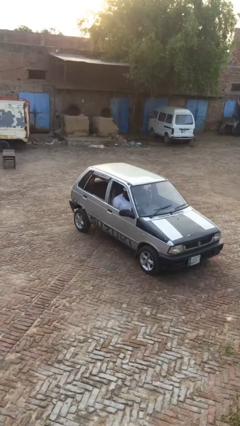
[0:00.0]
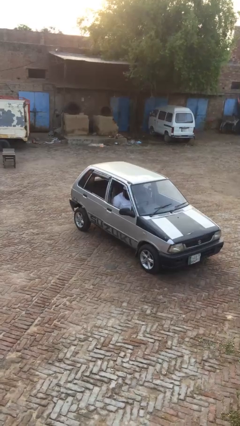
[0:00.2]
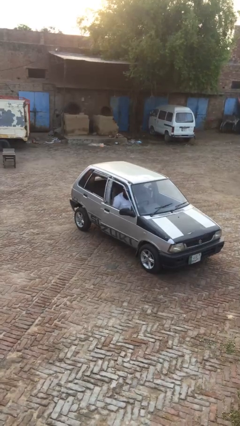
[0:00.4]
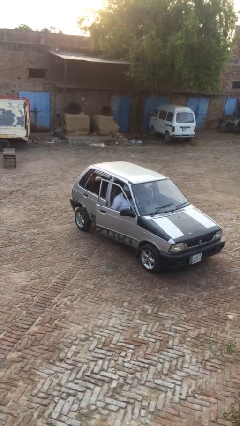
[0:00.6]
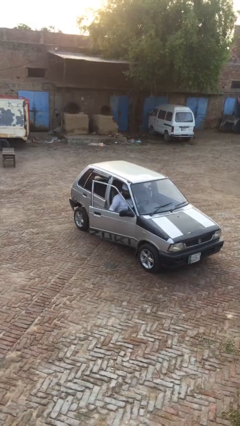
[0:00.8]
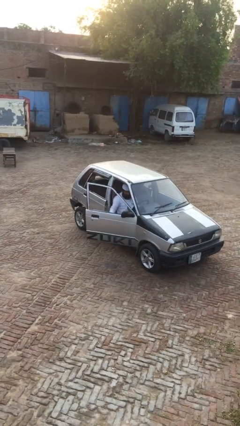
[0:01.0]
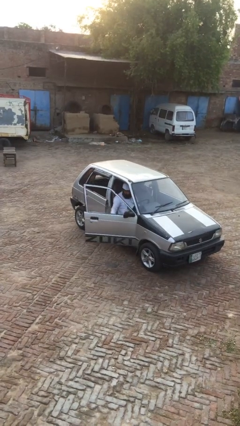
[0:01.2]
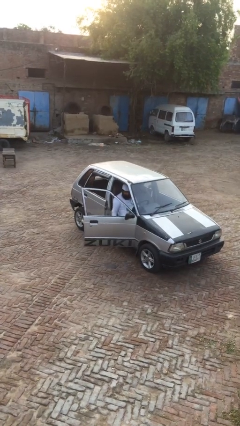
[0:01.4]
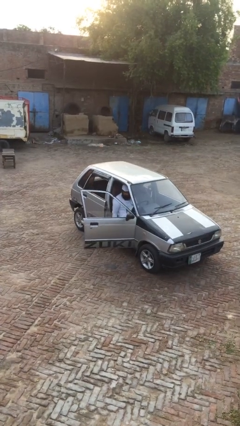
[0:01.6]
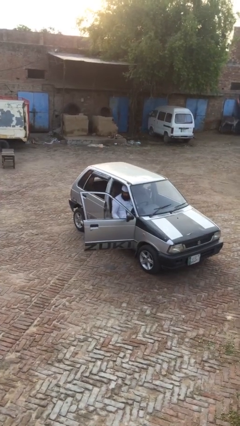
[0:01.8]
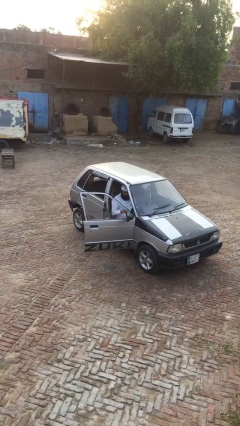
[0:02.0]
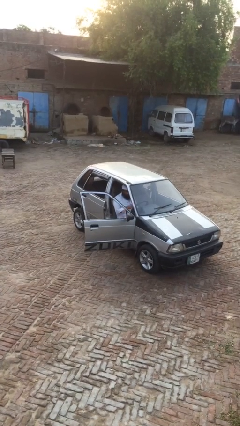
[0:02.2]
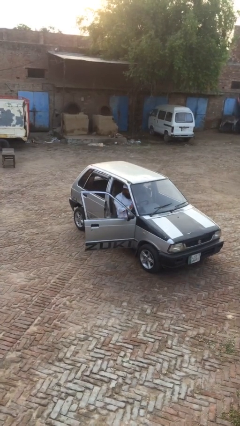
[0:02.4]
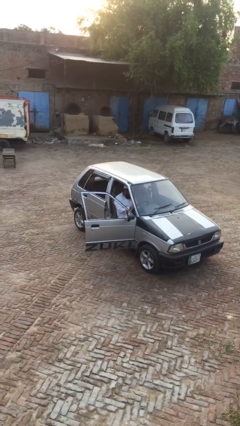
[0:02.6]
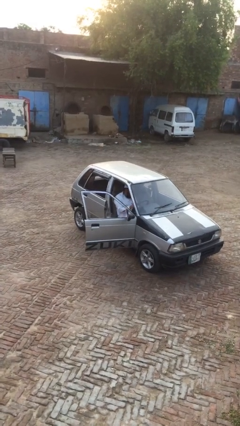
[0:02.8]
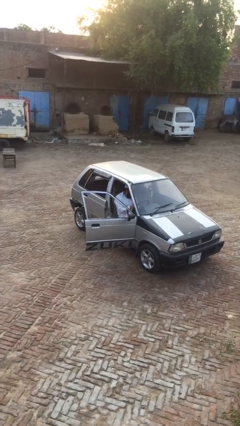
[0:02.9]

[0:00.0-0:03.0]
person opens car door

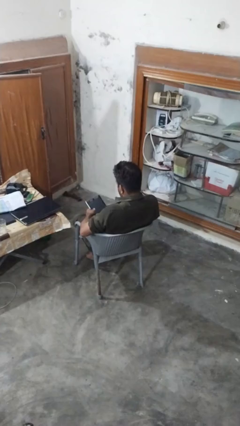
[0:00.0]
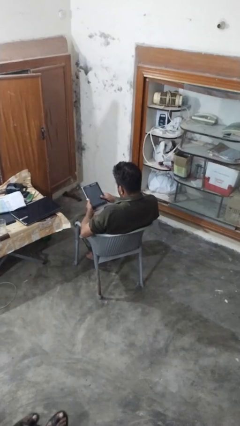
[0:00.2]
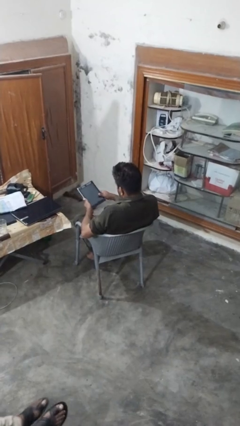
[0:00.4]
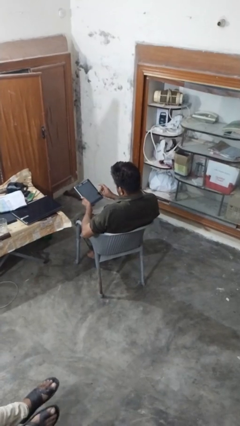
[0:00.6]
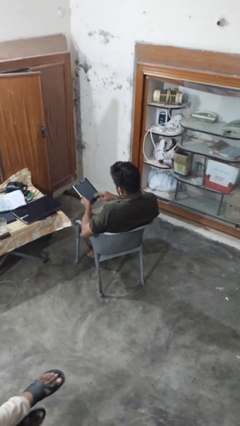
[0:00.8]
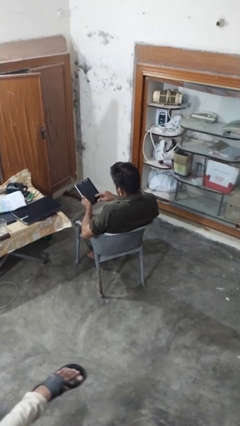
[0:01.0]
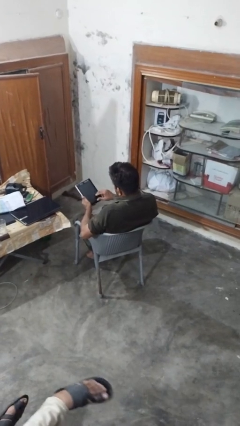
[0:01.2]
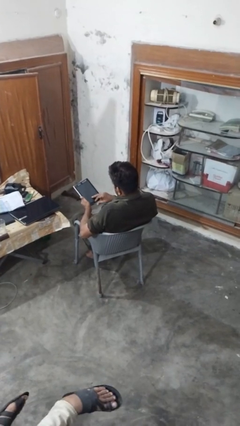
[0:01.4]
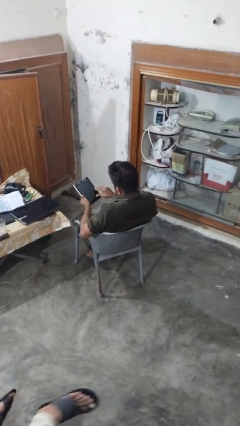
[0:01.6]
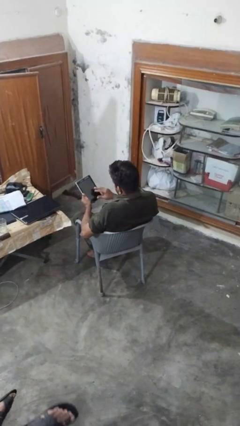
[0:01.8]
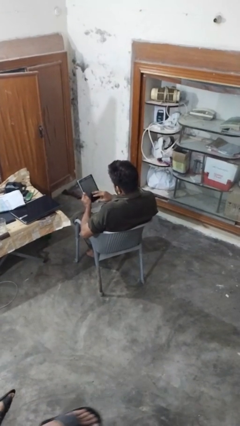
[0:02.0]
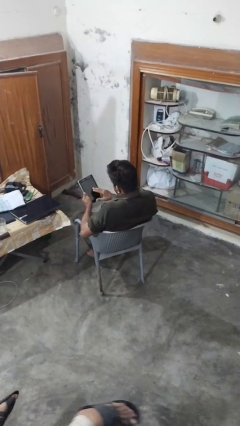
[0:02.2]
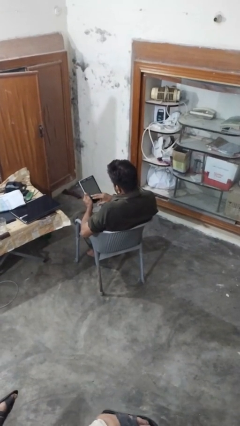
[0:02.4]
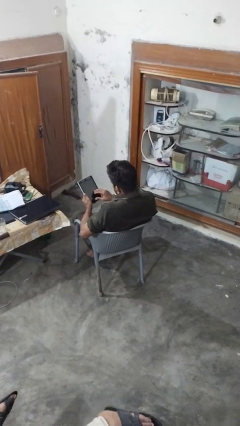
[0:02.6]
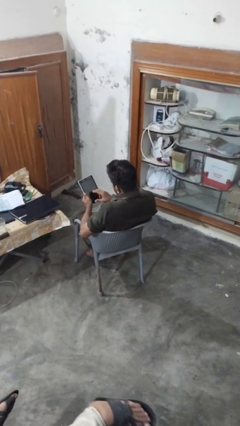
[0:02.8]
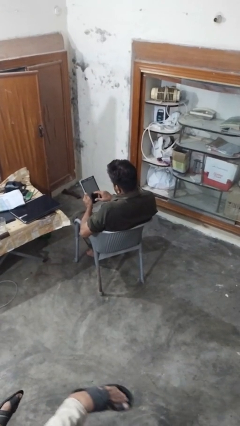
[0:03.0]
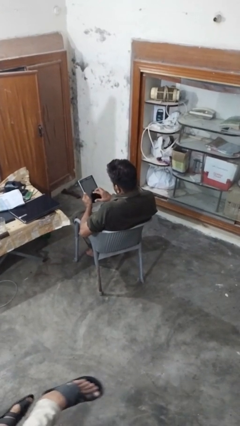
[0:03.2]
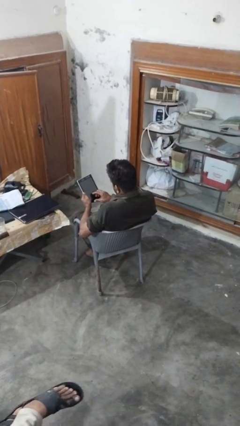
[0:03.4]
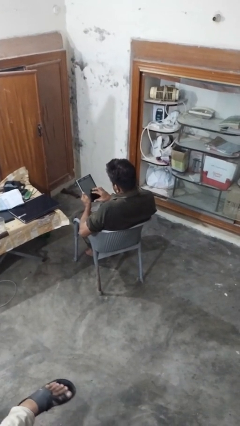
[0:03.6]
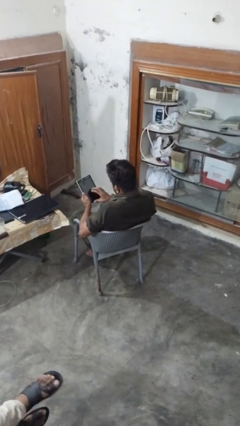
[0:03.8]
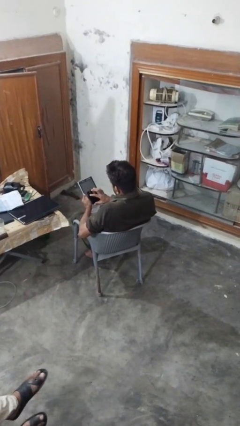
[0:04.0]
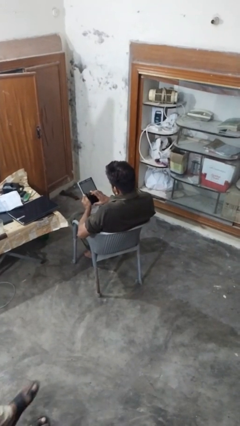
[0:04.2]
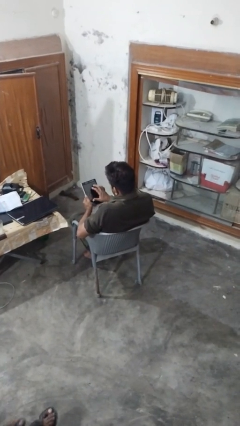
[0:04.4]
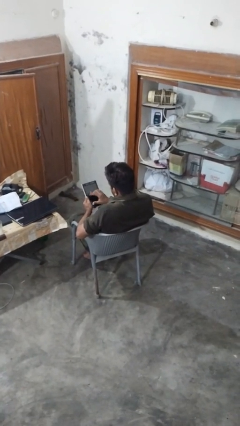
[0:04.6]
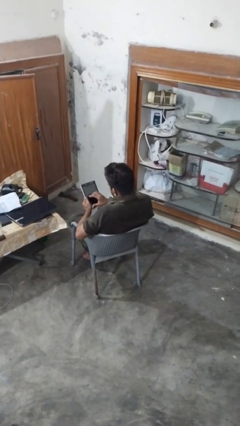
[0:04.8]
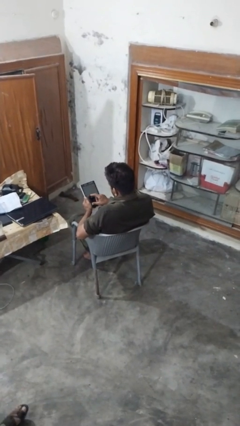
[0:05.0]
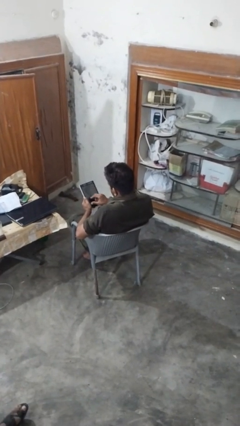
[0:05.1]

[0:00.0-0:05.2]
person interacts with tablet

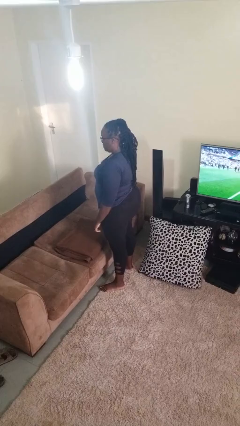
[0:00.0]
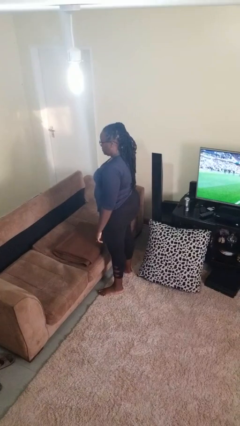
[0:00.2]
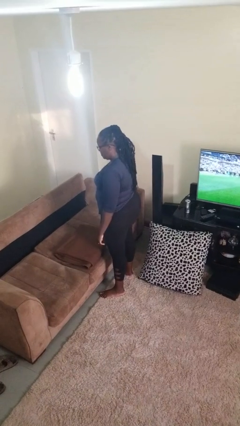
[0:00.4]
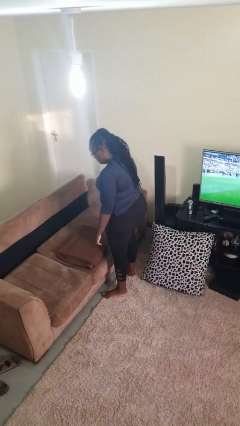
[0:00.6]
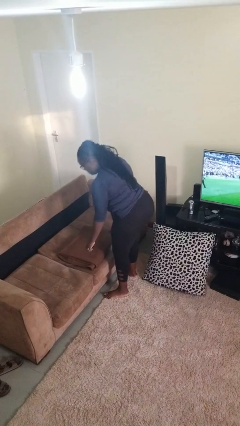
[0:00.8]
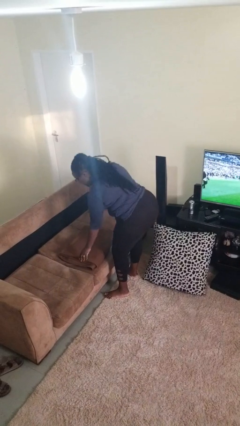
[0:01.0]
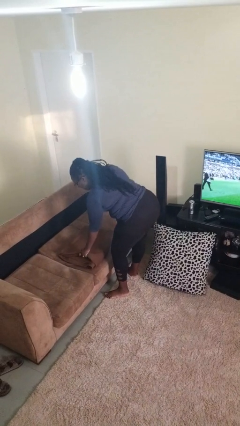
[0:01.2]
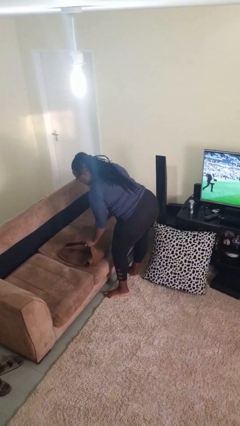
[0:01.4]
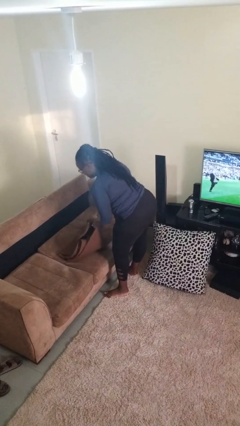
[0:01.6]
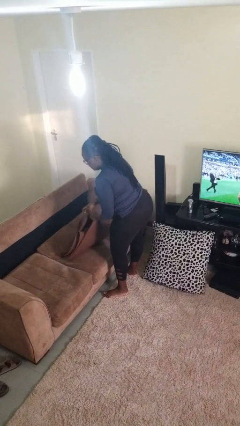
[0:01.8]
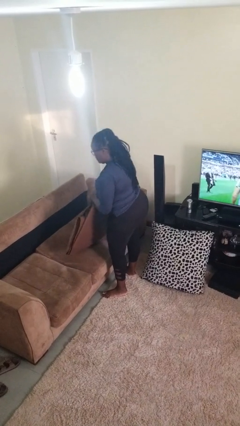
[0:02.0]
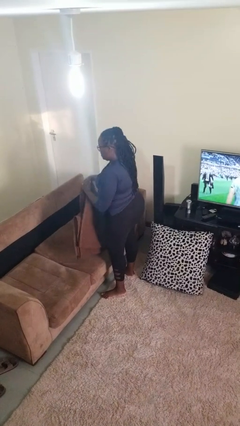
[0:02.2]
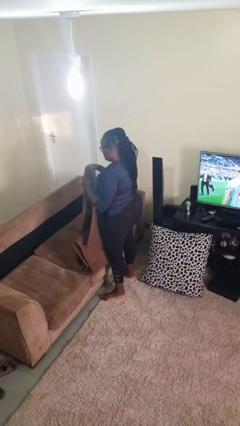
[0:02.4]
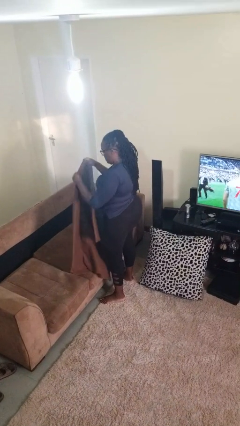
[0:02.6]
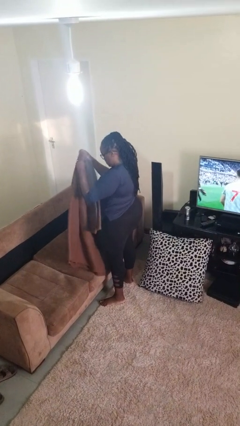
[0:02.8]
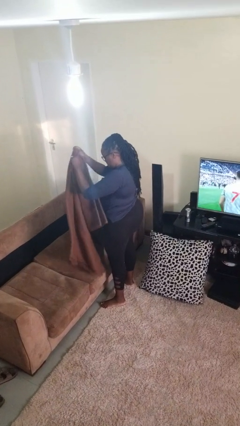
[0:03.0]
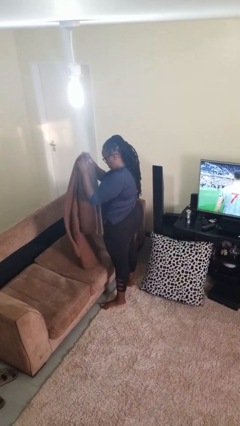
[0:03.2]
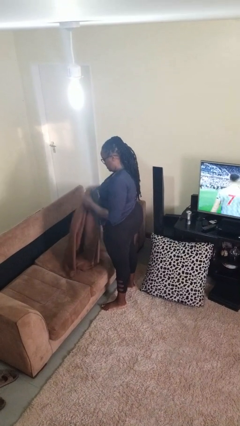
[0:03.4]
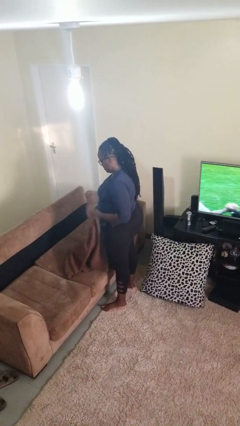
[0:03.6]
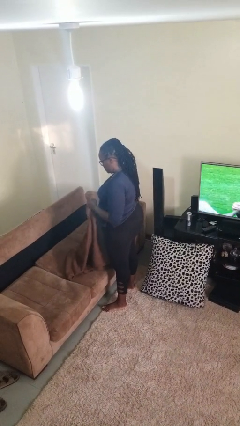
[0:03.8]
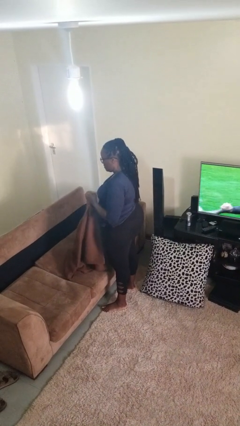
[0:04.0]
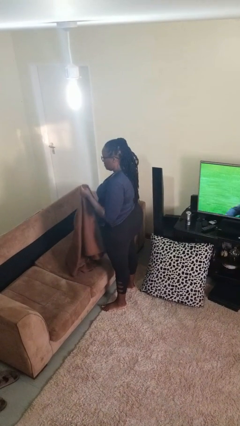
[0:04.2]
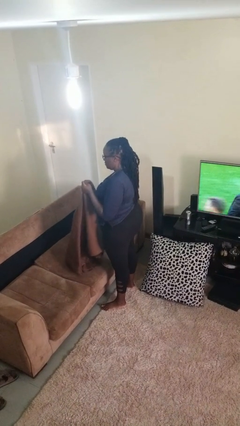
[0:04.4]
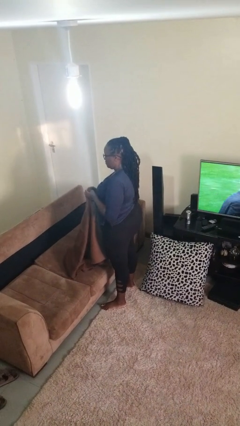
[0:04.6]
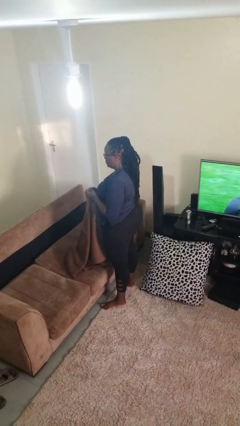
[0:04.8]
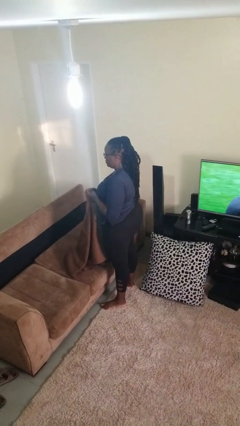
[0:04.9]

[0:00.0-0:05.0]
person unfolds blanket

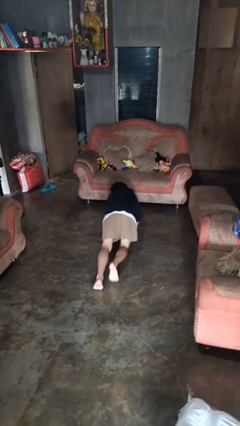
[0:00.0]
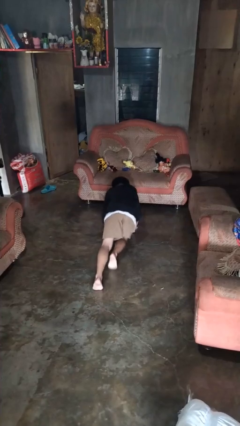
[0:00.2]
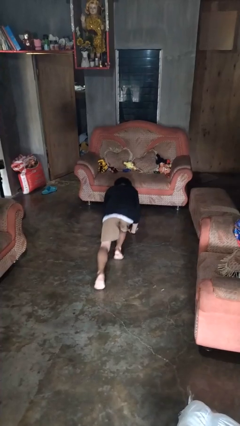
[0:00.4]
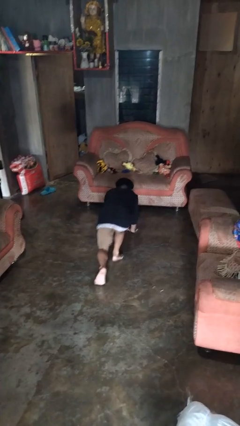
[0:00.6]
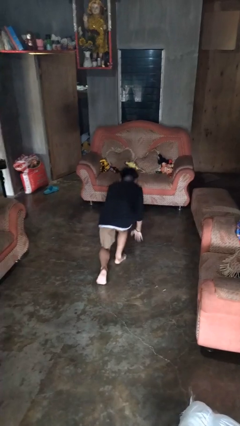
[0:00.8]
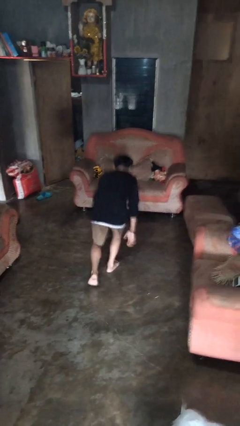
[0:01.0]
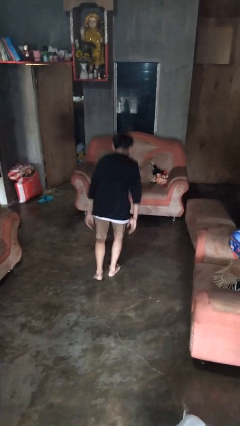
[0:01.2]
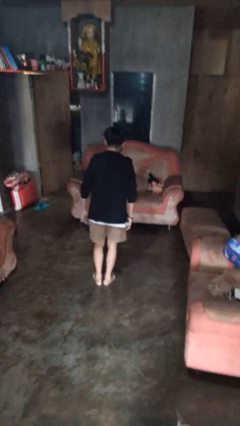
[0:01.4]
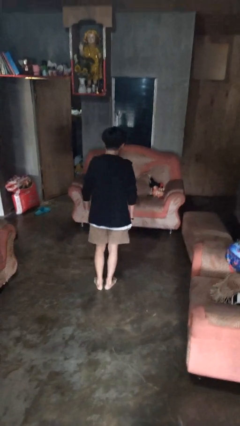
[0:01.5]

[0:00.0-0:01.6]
person stands up from floor

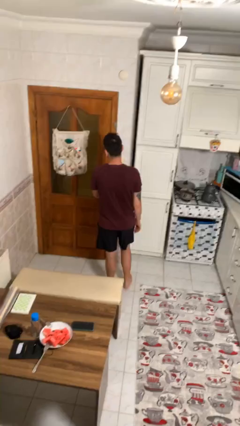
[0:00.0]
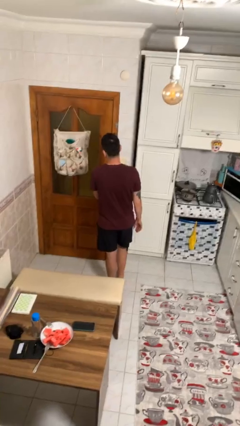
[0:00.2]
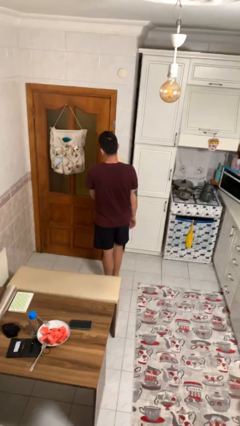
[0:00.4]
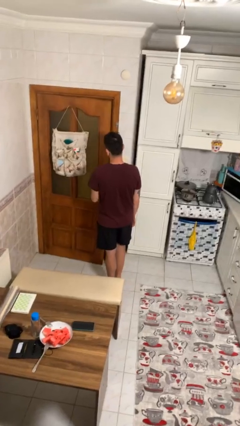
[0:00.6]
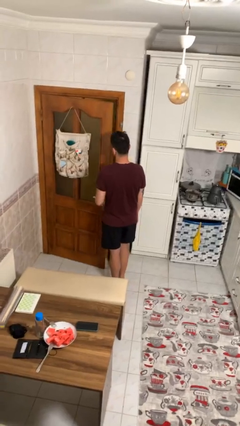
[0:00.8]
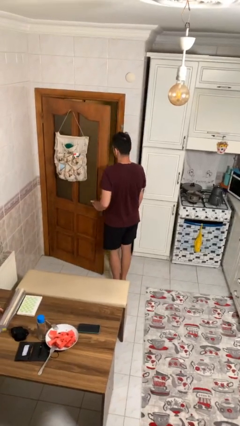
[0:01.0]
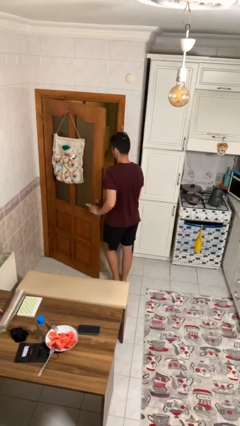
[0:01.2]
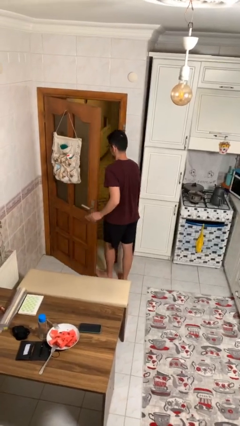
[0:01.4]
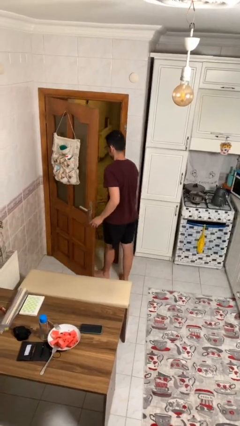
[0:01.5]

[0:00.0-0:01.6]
person opens facility door

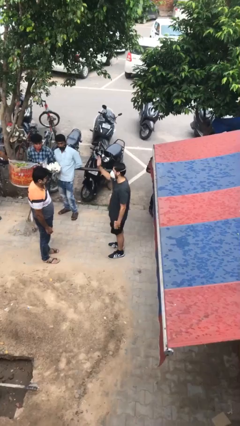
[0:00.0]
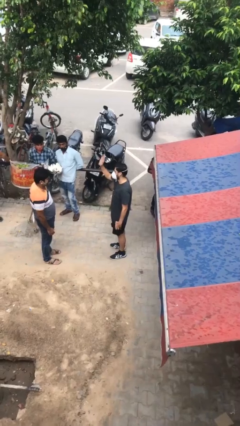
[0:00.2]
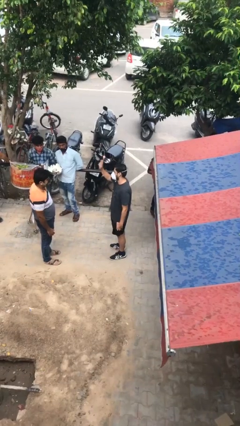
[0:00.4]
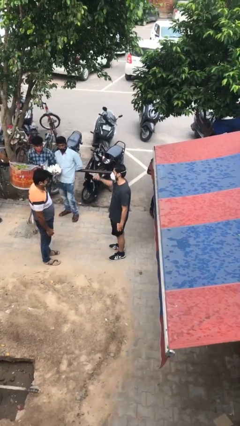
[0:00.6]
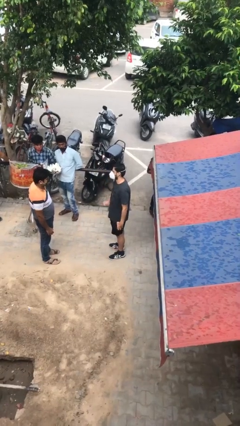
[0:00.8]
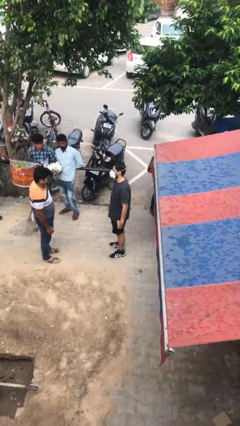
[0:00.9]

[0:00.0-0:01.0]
person waves at person
